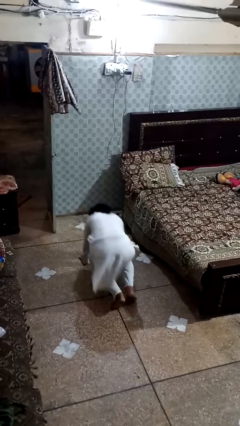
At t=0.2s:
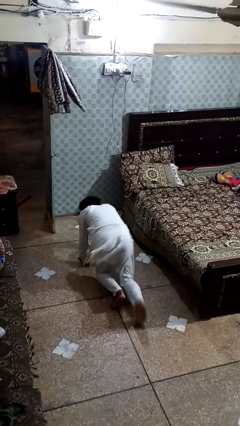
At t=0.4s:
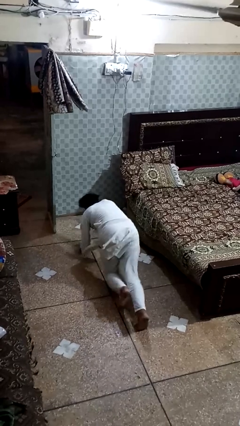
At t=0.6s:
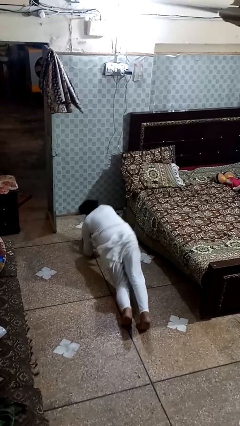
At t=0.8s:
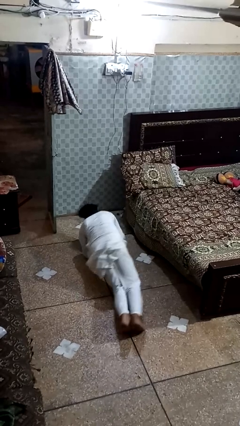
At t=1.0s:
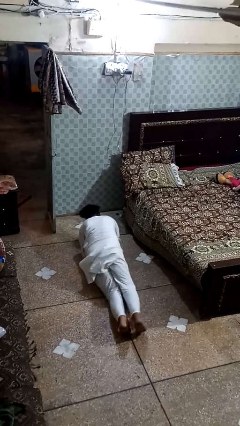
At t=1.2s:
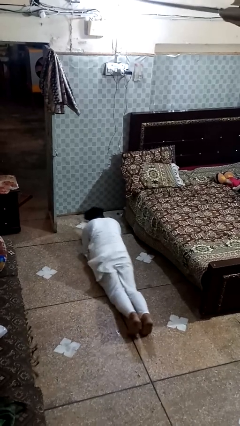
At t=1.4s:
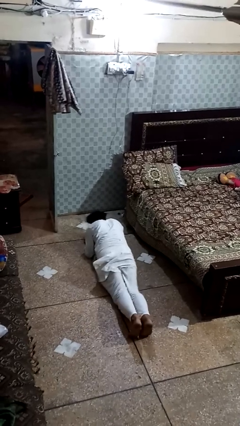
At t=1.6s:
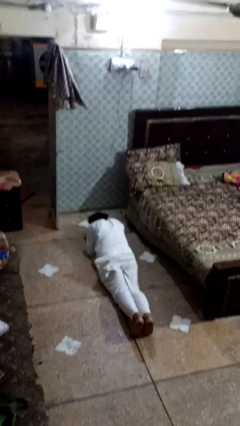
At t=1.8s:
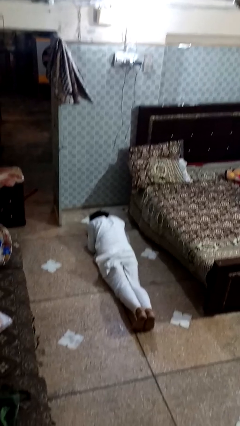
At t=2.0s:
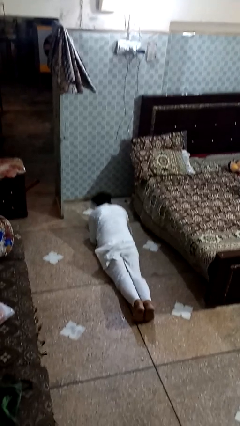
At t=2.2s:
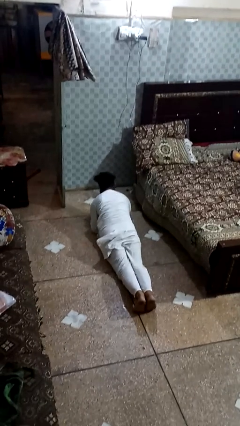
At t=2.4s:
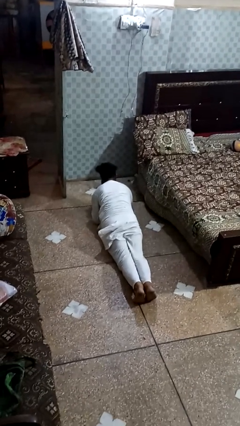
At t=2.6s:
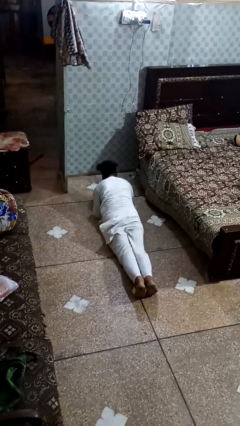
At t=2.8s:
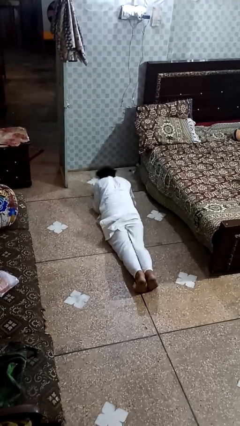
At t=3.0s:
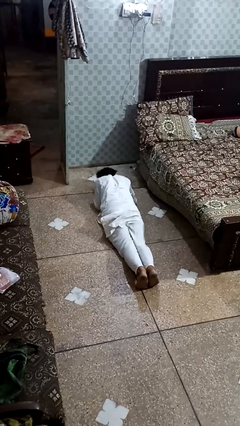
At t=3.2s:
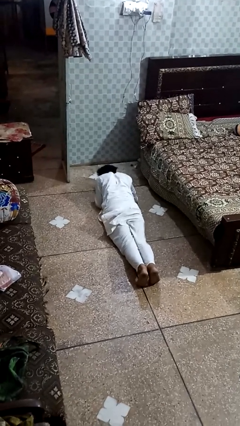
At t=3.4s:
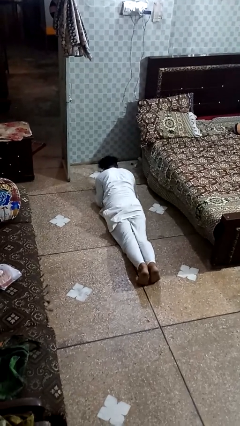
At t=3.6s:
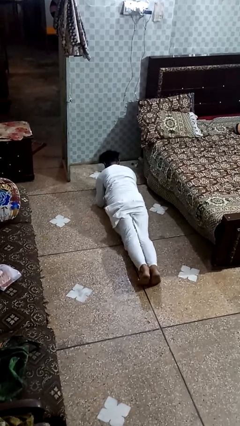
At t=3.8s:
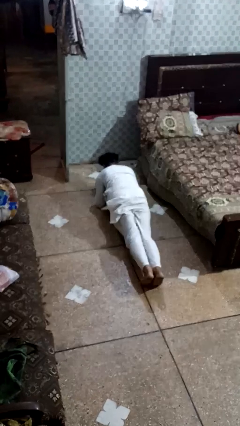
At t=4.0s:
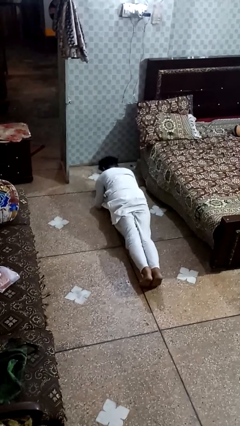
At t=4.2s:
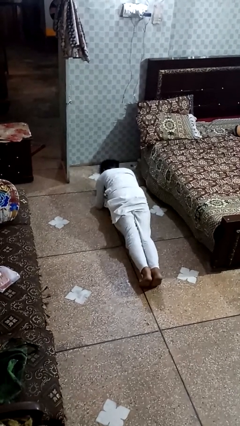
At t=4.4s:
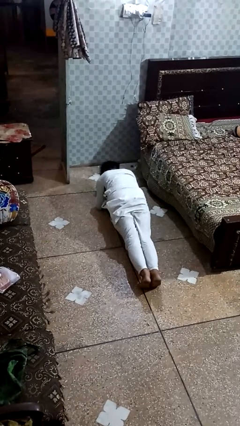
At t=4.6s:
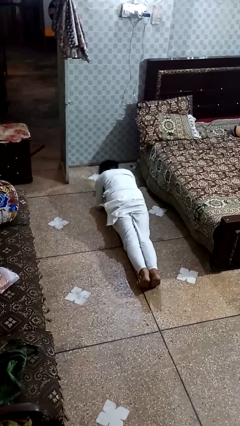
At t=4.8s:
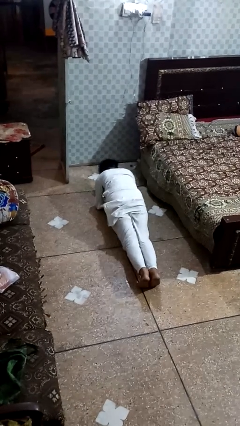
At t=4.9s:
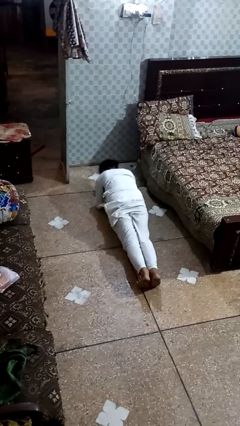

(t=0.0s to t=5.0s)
person stands up from floor

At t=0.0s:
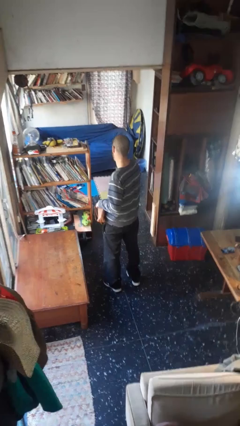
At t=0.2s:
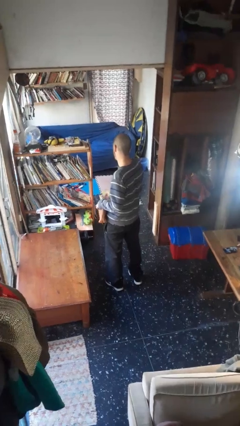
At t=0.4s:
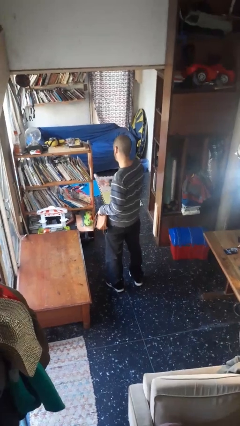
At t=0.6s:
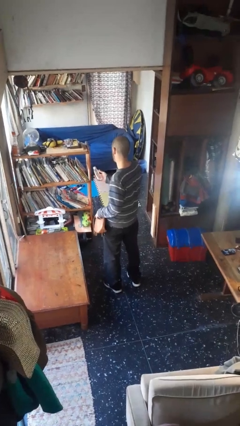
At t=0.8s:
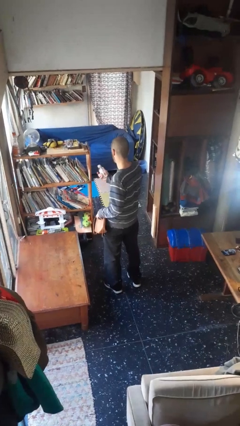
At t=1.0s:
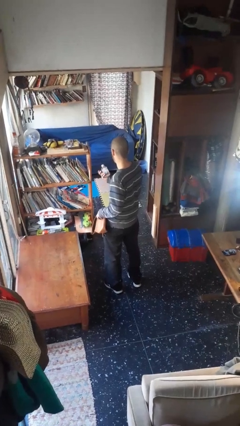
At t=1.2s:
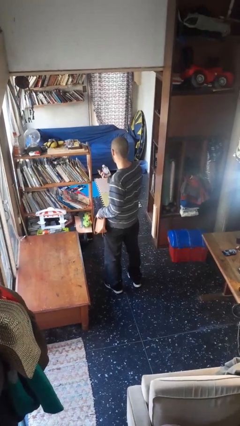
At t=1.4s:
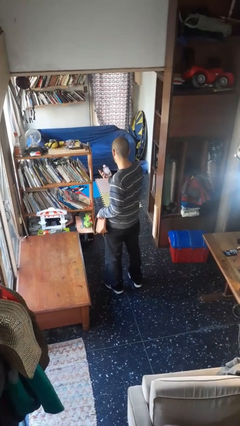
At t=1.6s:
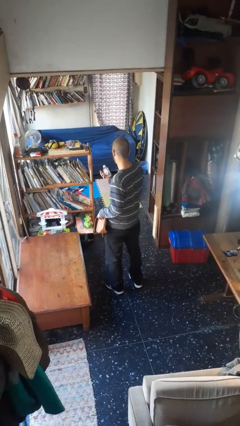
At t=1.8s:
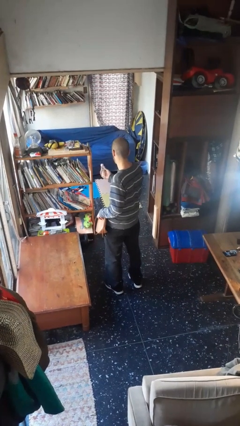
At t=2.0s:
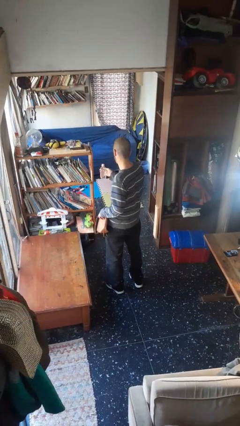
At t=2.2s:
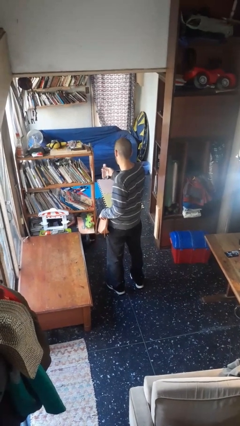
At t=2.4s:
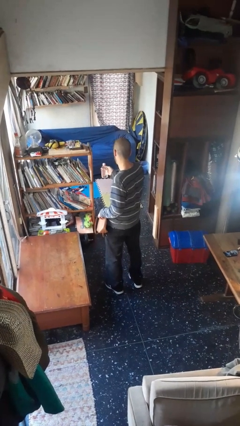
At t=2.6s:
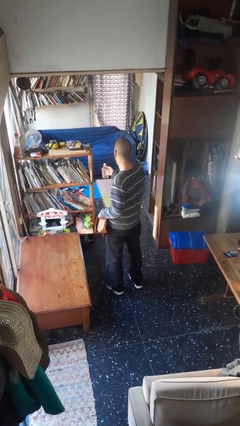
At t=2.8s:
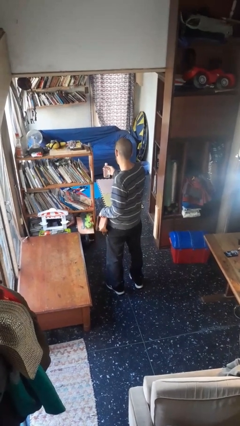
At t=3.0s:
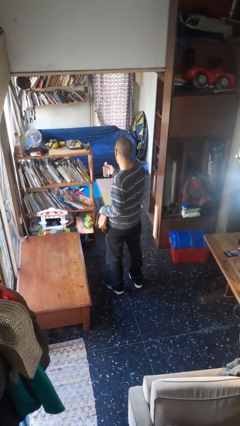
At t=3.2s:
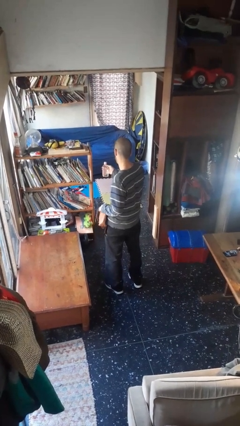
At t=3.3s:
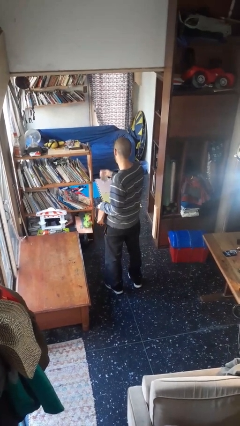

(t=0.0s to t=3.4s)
person takes object from purse

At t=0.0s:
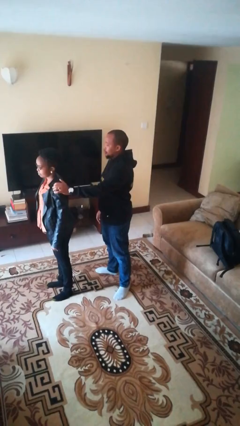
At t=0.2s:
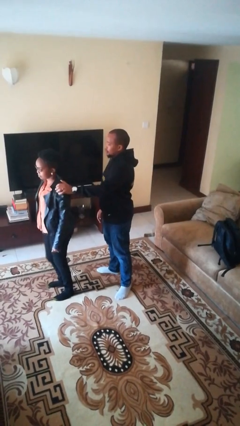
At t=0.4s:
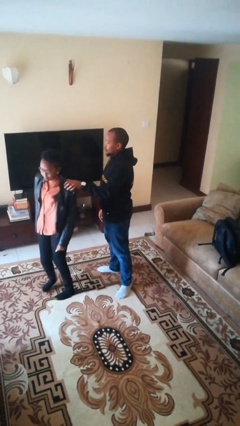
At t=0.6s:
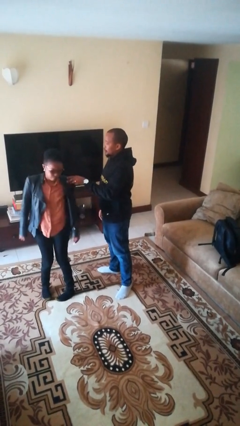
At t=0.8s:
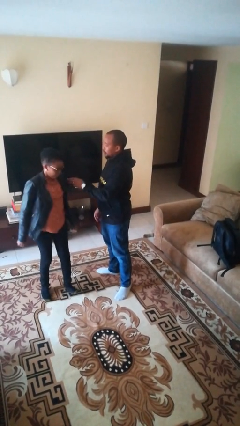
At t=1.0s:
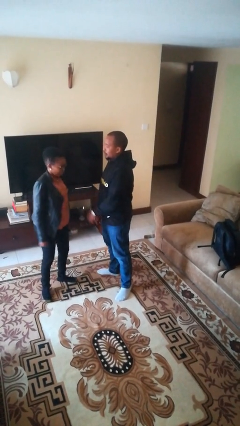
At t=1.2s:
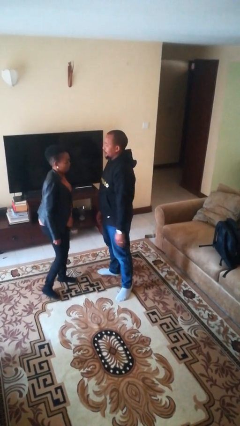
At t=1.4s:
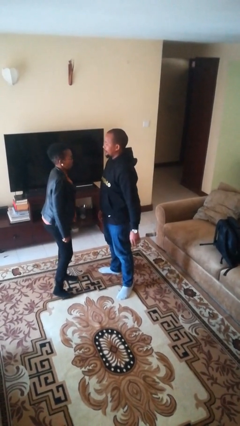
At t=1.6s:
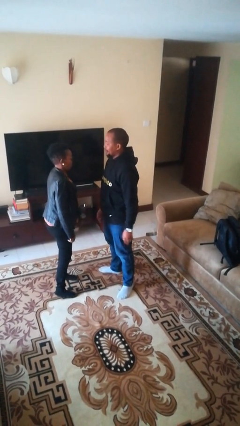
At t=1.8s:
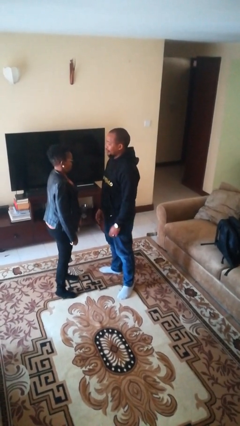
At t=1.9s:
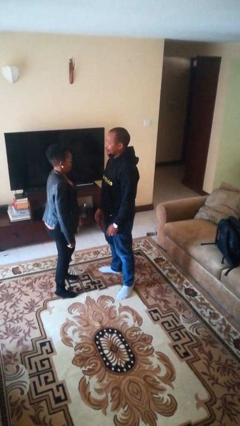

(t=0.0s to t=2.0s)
person spins person around

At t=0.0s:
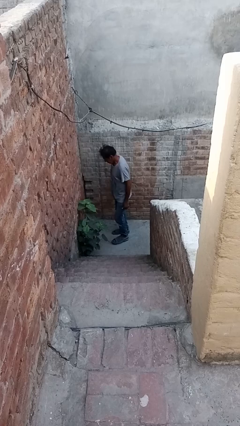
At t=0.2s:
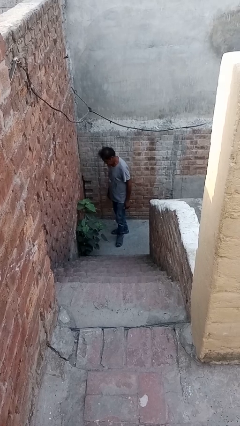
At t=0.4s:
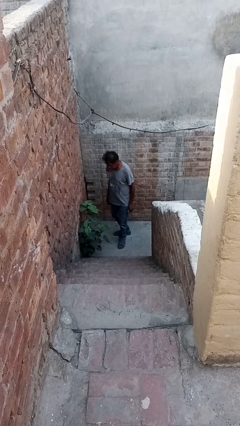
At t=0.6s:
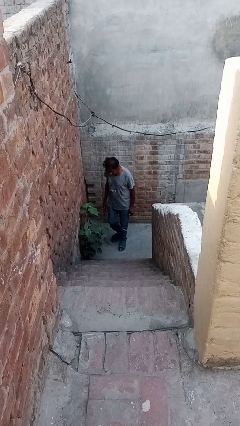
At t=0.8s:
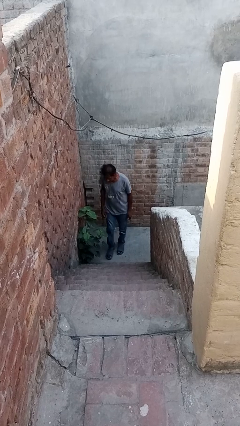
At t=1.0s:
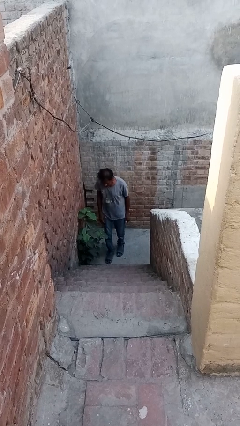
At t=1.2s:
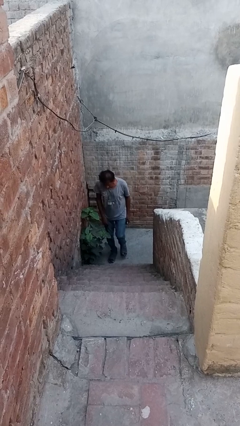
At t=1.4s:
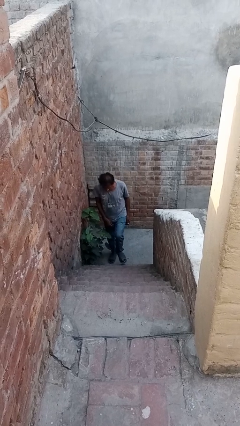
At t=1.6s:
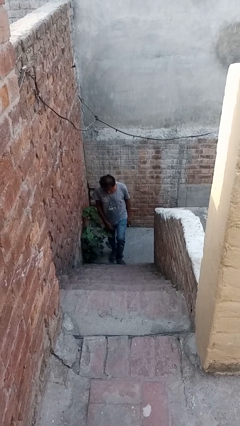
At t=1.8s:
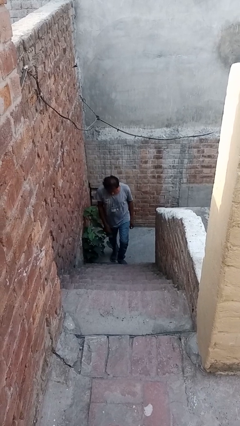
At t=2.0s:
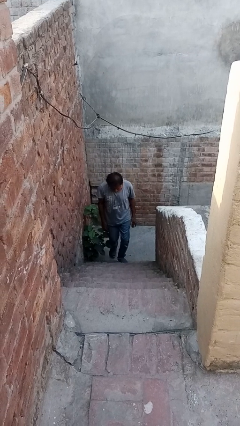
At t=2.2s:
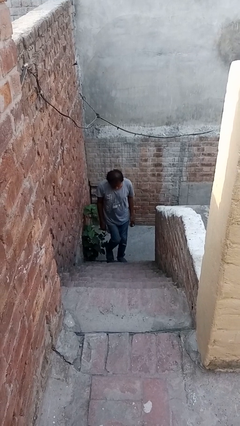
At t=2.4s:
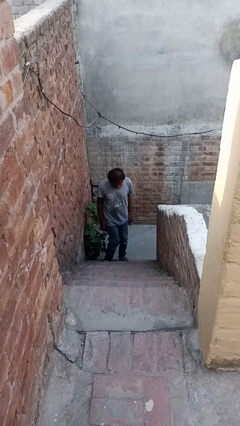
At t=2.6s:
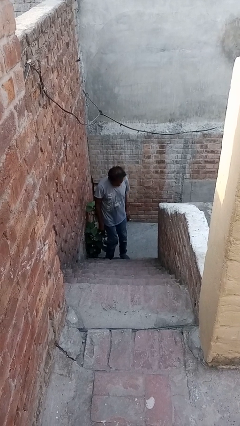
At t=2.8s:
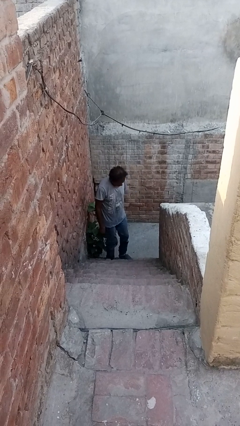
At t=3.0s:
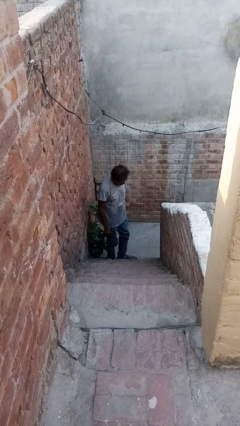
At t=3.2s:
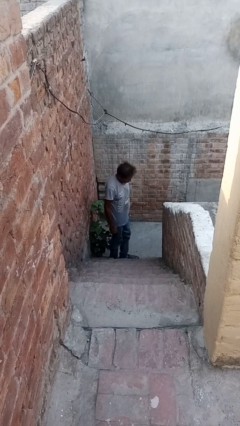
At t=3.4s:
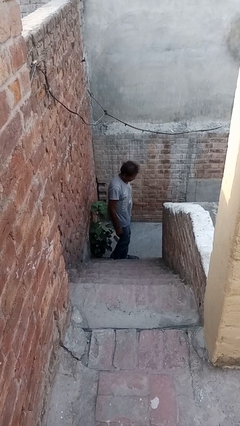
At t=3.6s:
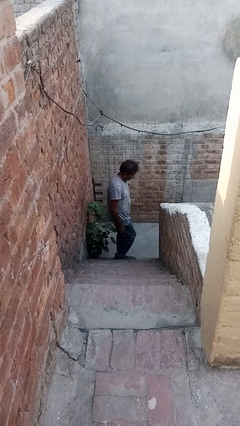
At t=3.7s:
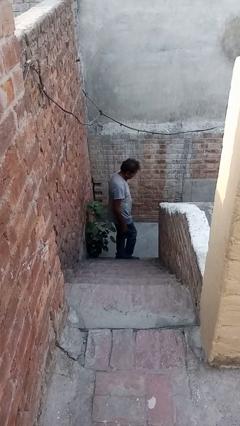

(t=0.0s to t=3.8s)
person climbs up stairs

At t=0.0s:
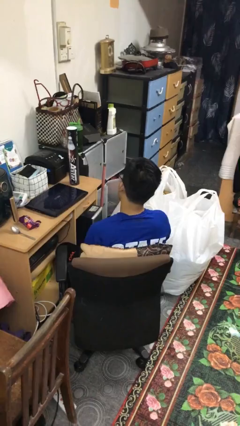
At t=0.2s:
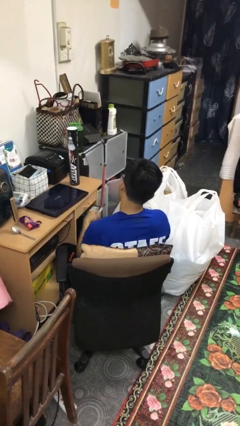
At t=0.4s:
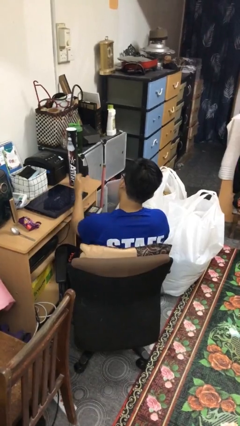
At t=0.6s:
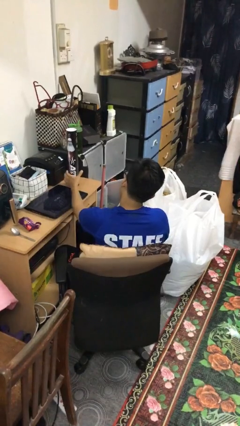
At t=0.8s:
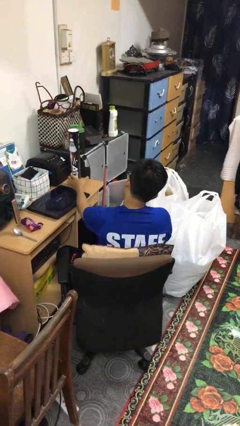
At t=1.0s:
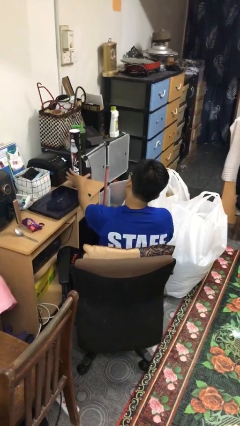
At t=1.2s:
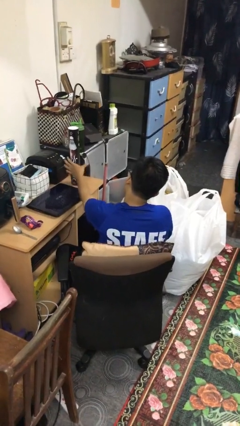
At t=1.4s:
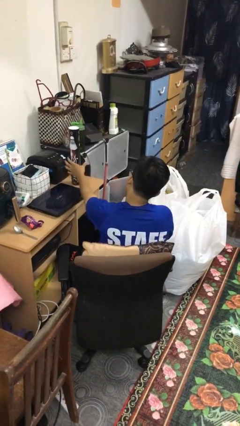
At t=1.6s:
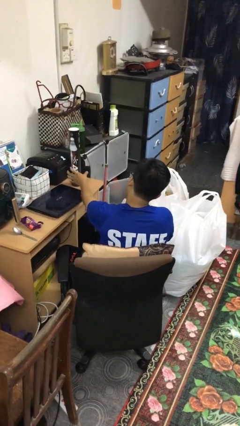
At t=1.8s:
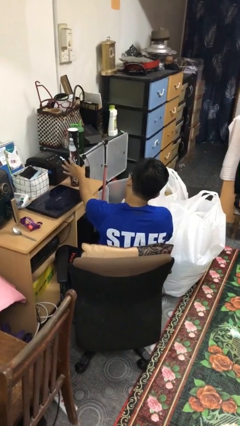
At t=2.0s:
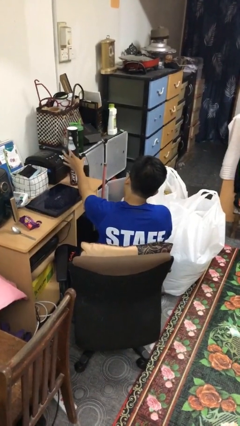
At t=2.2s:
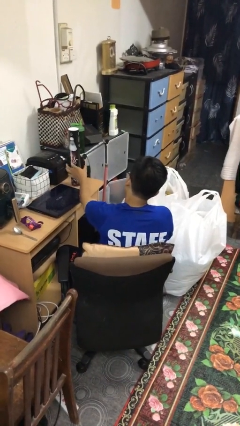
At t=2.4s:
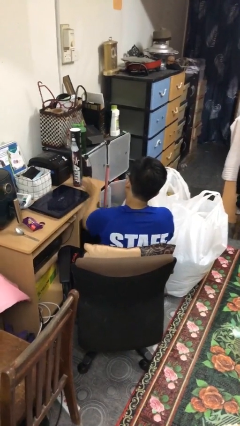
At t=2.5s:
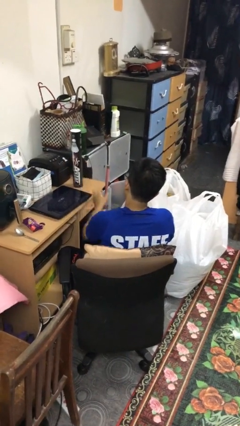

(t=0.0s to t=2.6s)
person waves hand over object

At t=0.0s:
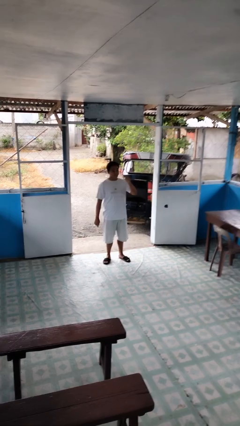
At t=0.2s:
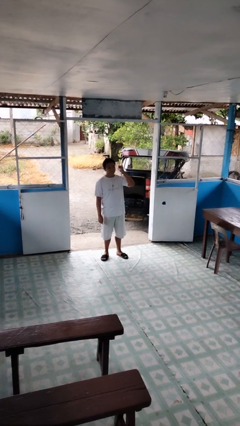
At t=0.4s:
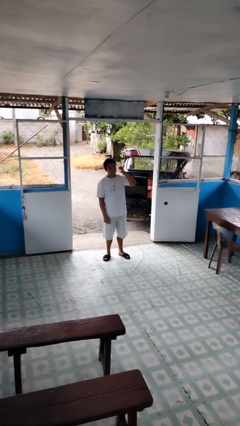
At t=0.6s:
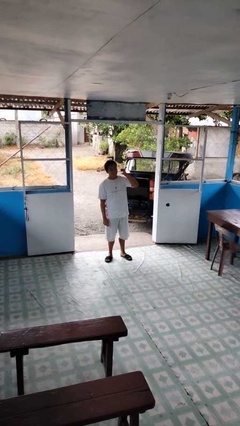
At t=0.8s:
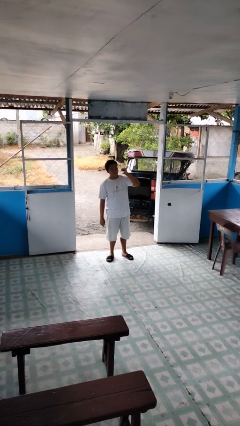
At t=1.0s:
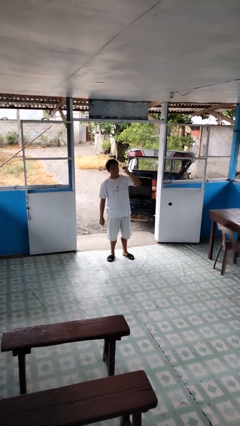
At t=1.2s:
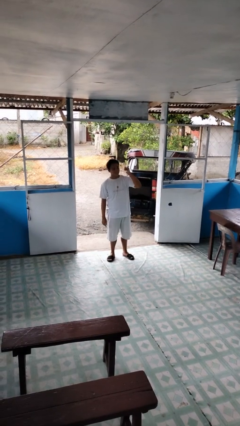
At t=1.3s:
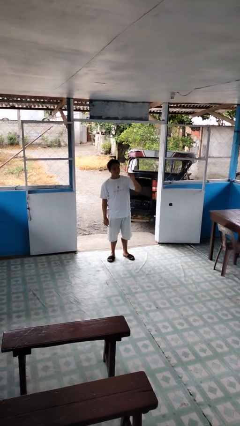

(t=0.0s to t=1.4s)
person gestures behind me
